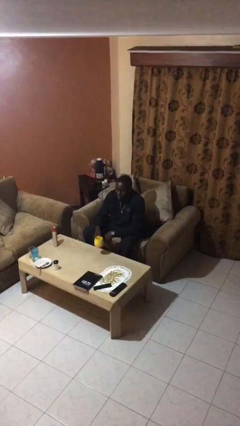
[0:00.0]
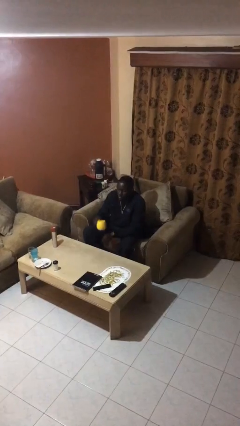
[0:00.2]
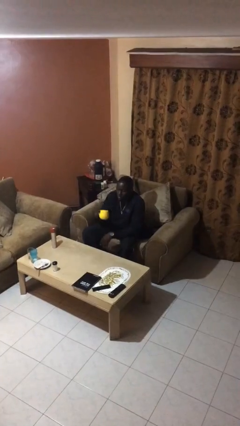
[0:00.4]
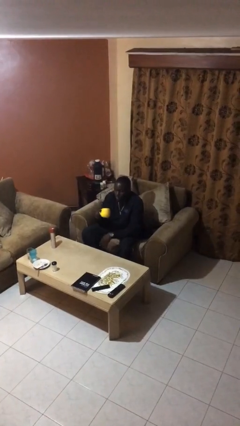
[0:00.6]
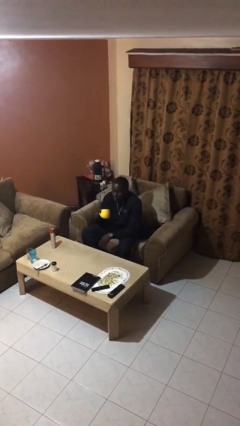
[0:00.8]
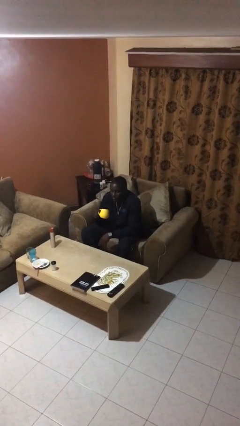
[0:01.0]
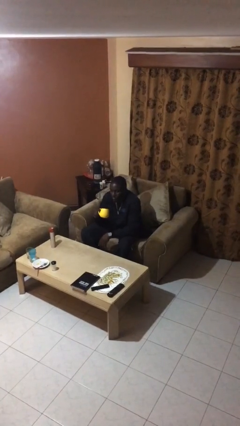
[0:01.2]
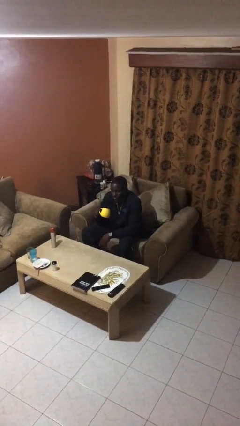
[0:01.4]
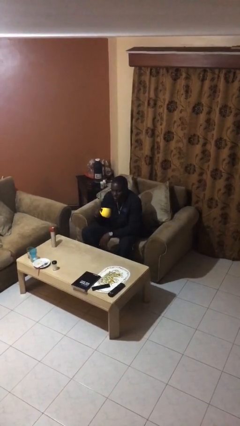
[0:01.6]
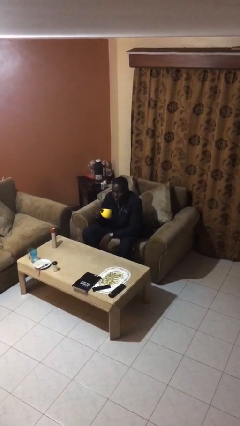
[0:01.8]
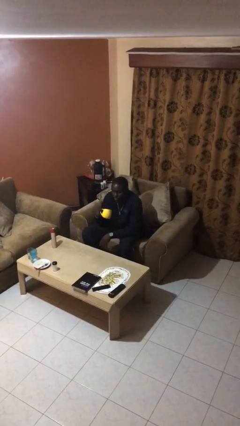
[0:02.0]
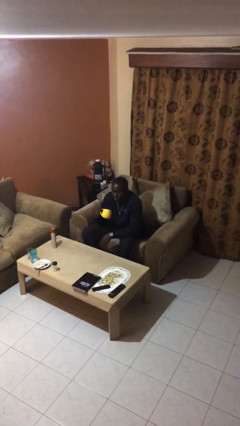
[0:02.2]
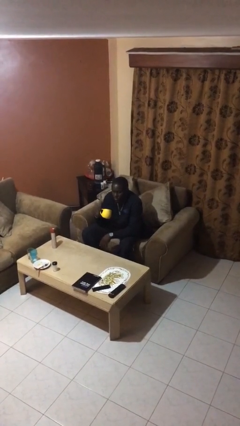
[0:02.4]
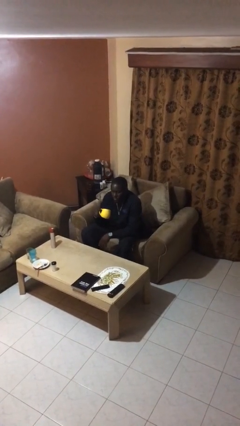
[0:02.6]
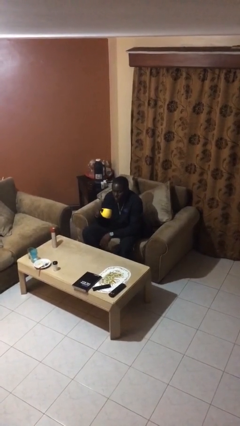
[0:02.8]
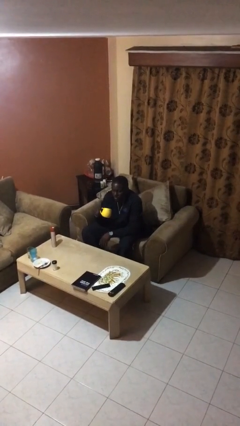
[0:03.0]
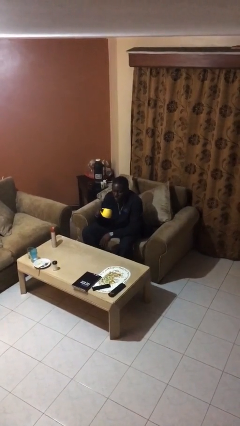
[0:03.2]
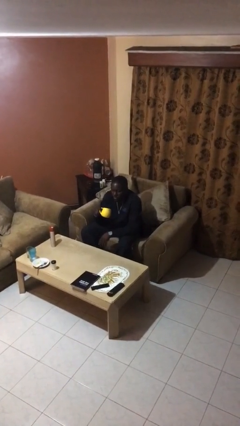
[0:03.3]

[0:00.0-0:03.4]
person picks up object from table

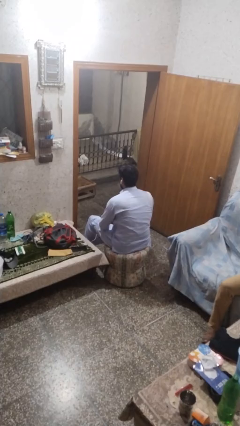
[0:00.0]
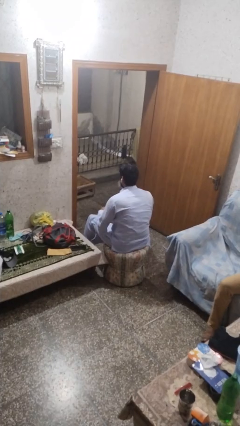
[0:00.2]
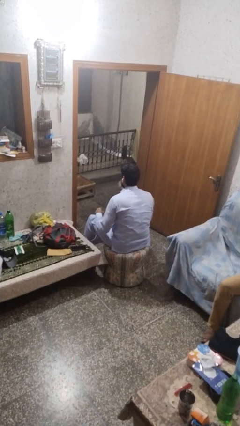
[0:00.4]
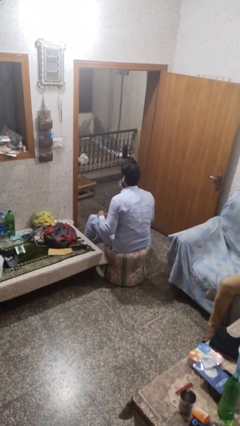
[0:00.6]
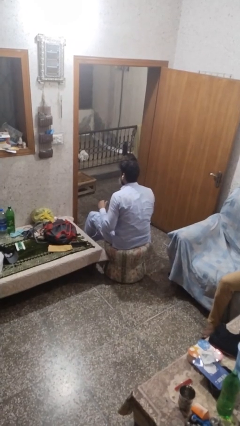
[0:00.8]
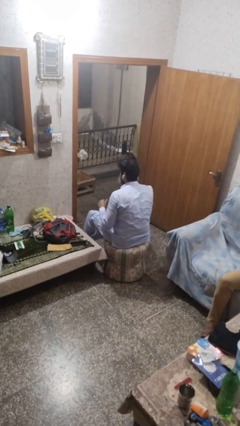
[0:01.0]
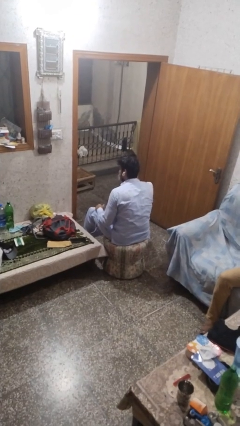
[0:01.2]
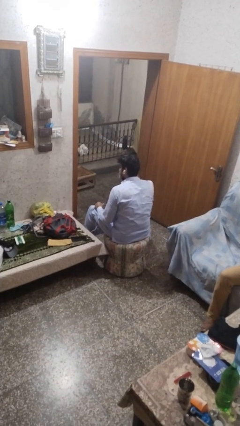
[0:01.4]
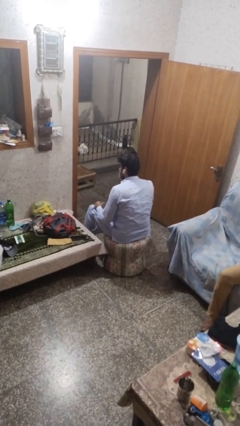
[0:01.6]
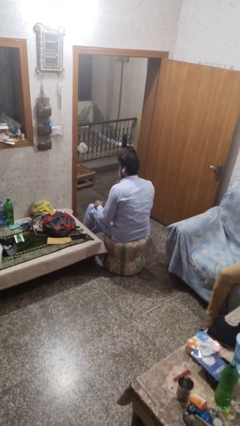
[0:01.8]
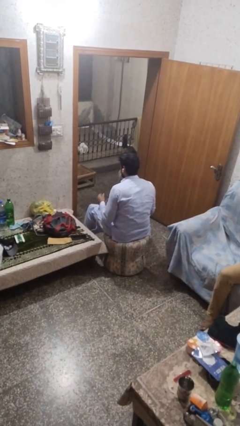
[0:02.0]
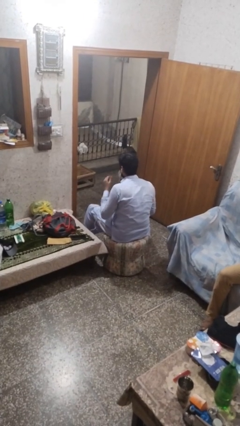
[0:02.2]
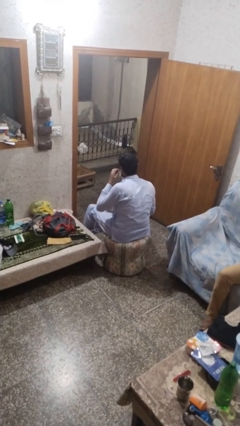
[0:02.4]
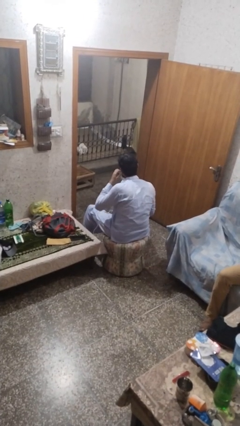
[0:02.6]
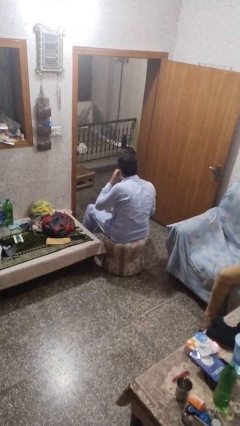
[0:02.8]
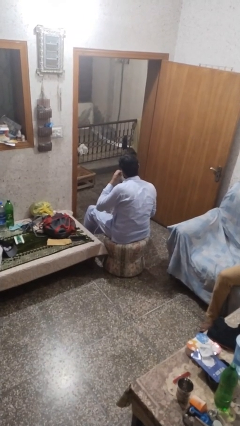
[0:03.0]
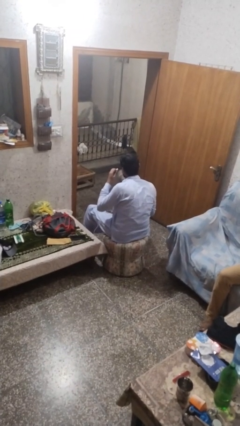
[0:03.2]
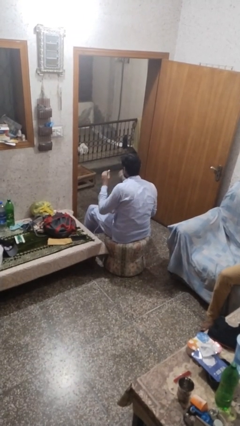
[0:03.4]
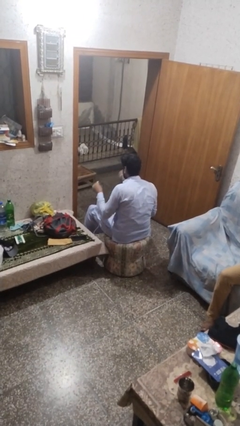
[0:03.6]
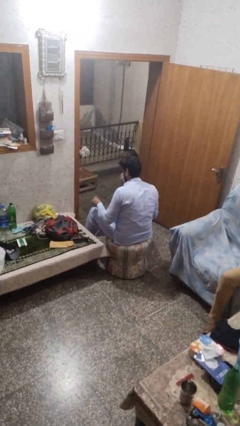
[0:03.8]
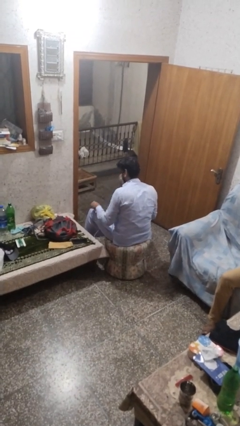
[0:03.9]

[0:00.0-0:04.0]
person takes off headphones

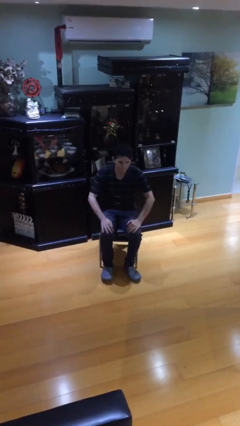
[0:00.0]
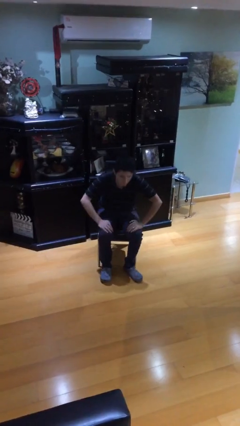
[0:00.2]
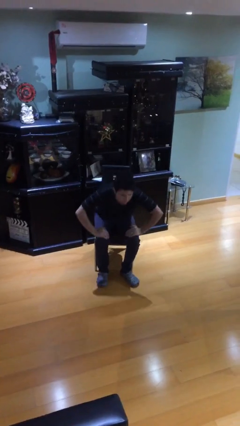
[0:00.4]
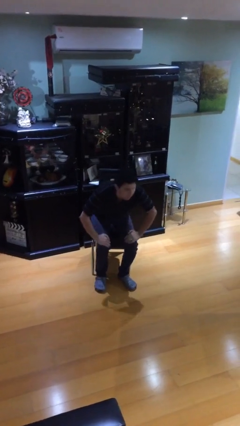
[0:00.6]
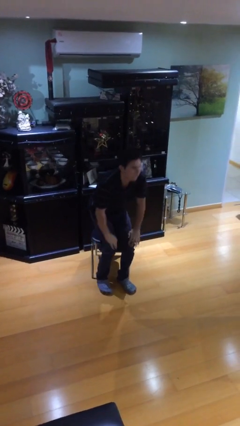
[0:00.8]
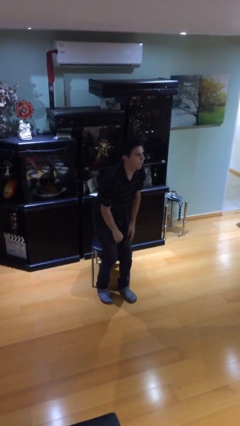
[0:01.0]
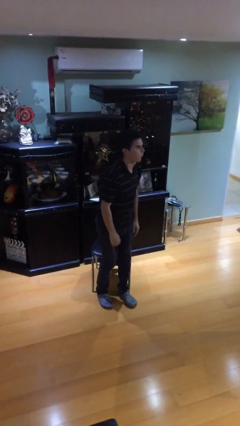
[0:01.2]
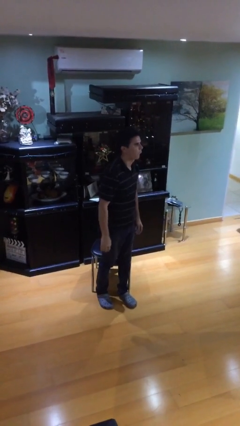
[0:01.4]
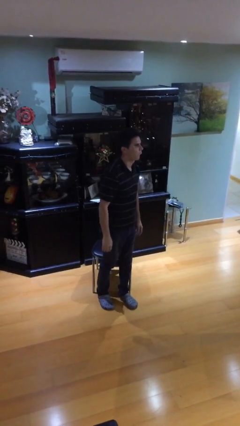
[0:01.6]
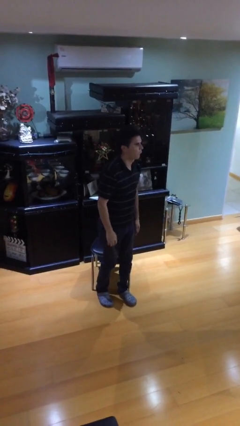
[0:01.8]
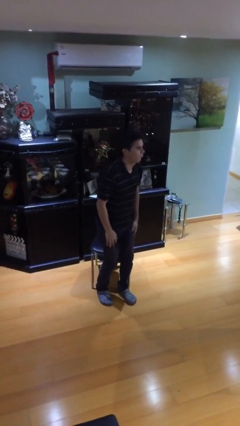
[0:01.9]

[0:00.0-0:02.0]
person stands up

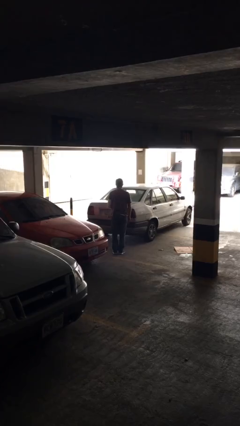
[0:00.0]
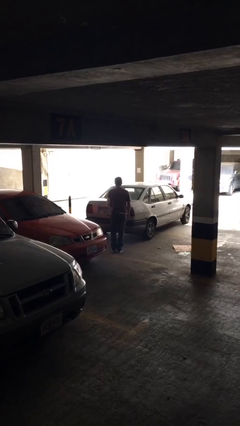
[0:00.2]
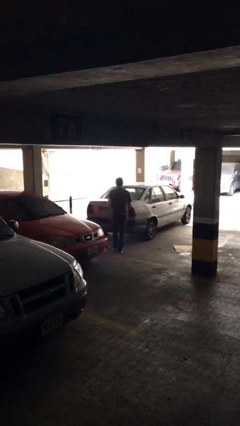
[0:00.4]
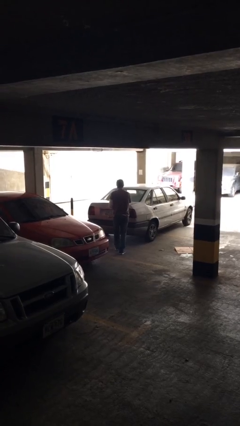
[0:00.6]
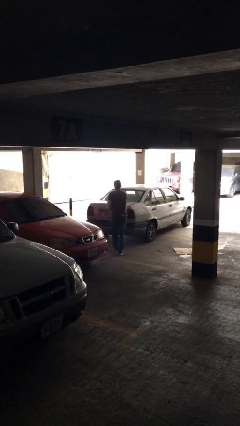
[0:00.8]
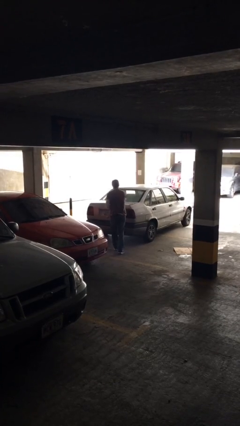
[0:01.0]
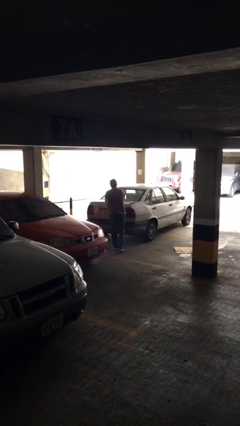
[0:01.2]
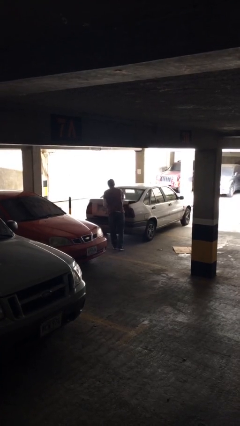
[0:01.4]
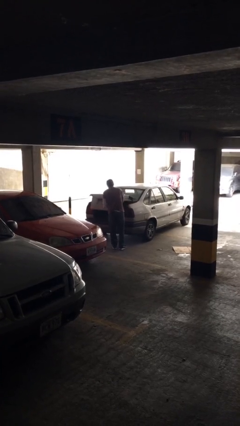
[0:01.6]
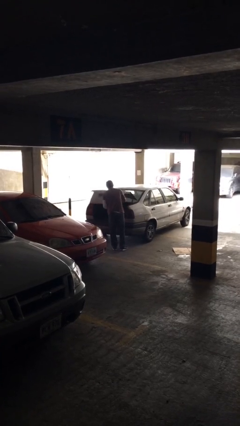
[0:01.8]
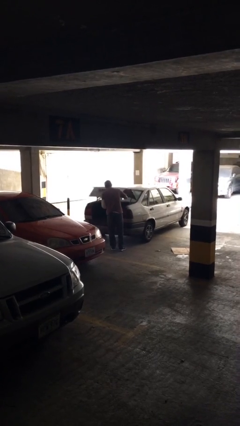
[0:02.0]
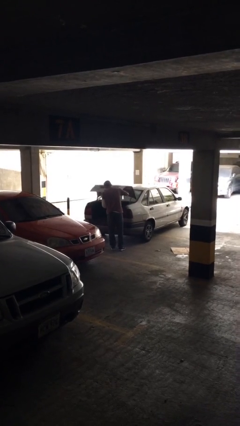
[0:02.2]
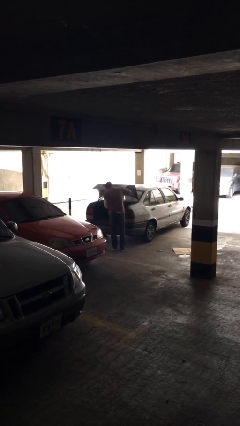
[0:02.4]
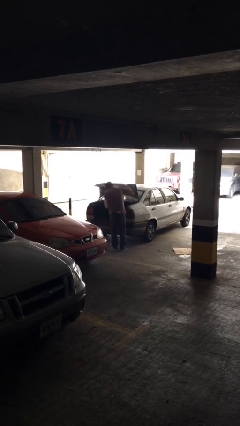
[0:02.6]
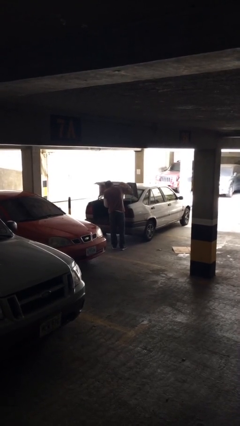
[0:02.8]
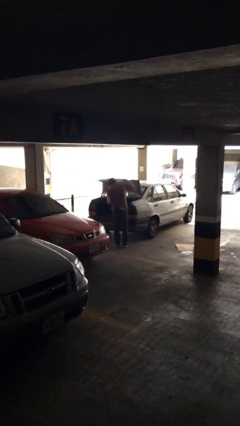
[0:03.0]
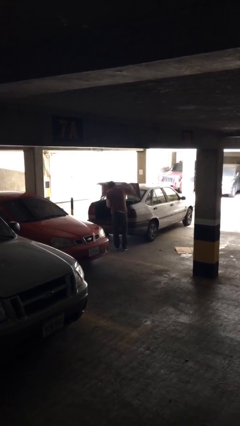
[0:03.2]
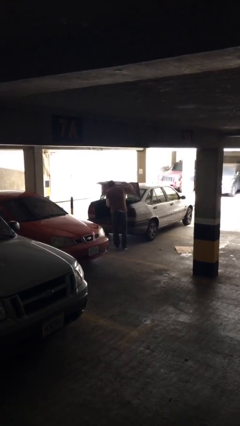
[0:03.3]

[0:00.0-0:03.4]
person opens car trunk

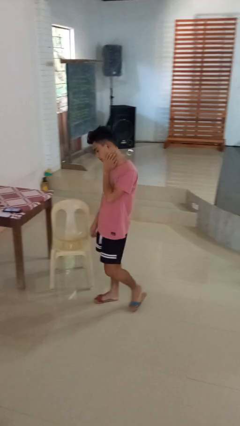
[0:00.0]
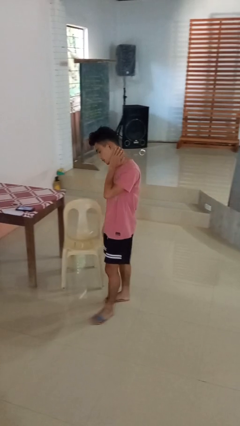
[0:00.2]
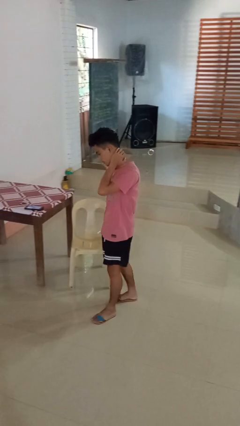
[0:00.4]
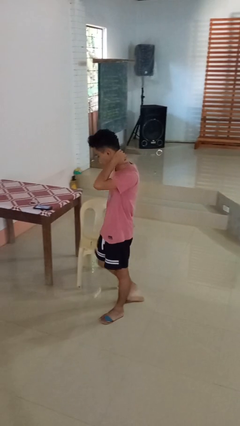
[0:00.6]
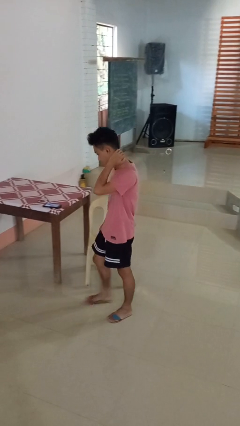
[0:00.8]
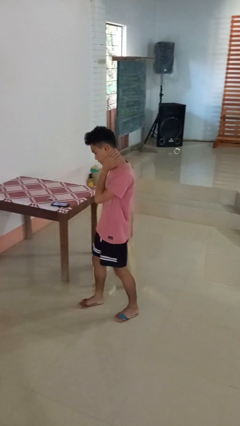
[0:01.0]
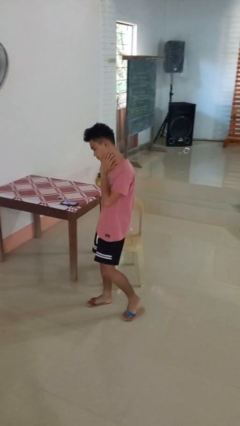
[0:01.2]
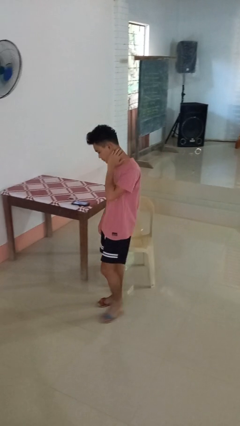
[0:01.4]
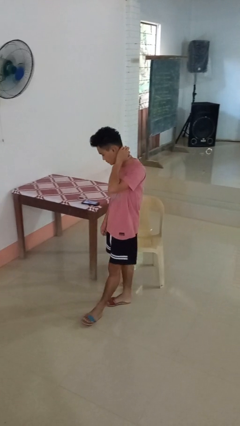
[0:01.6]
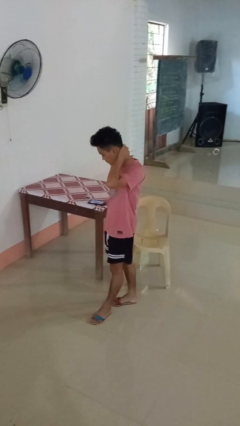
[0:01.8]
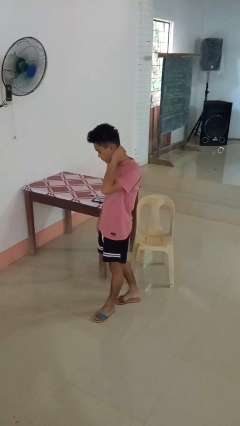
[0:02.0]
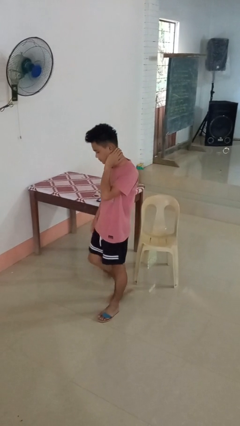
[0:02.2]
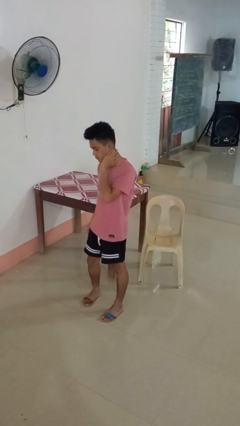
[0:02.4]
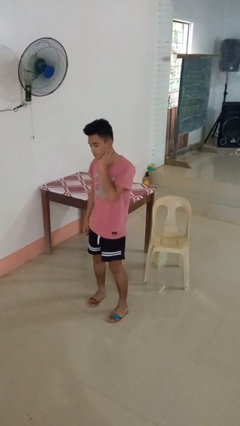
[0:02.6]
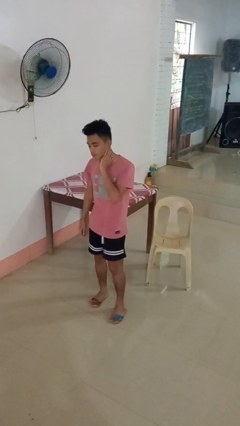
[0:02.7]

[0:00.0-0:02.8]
person rubs neck

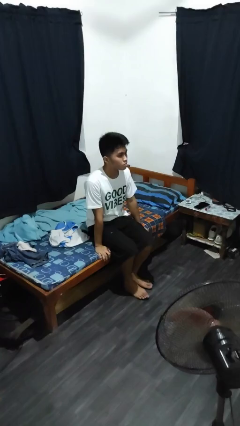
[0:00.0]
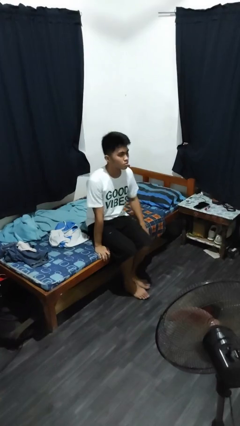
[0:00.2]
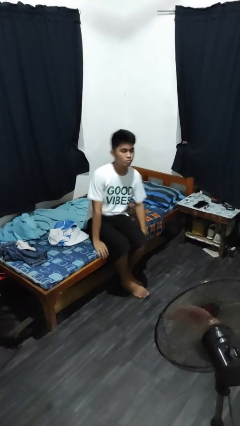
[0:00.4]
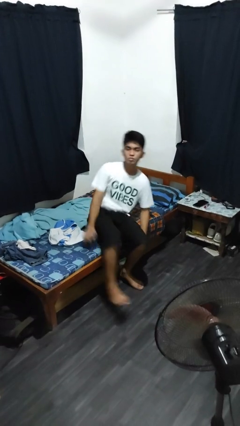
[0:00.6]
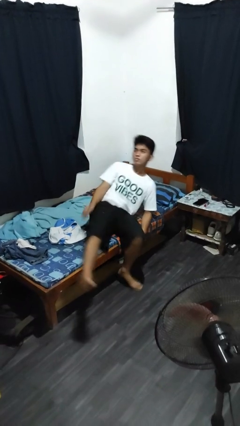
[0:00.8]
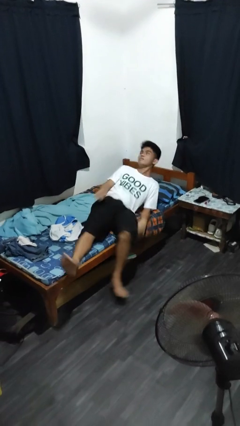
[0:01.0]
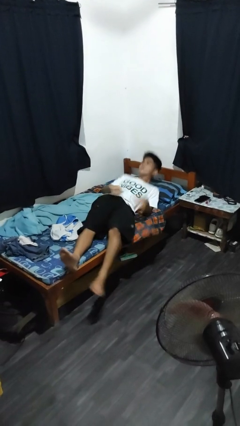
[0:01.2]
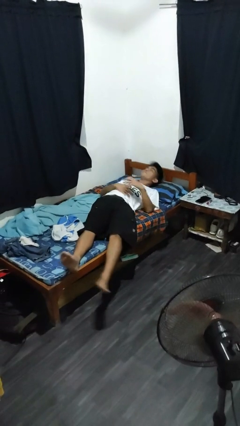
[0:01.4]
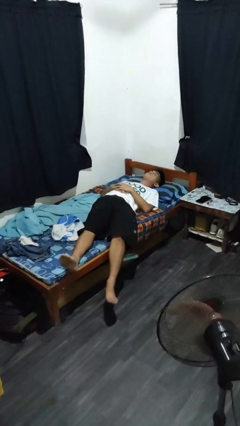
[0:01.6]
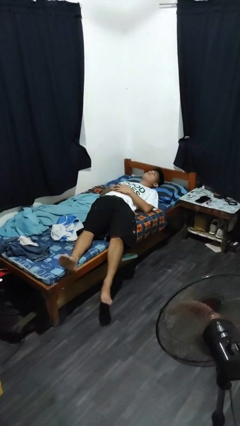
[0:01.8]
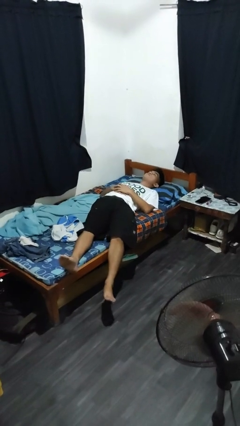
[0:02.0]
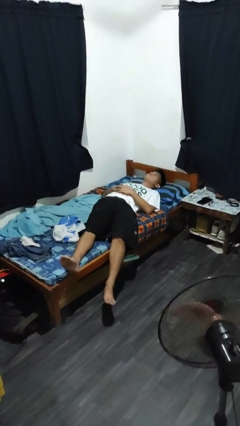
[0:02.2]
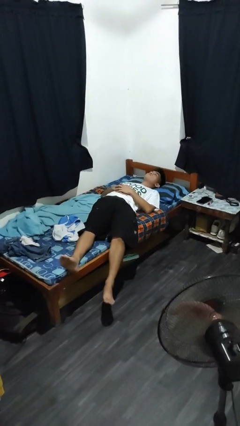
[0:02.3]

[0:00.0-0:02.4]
person lies down on bed
